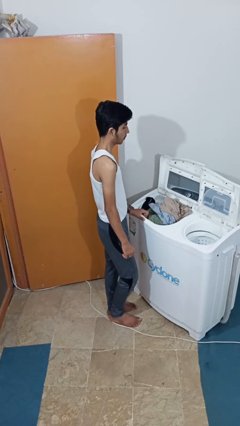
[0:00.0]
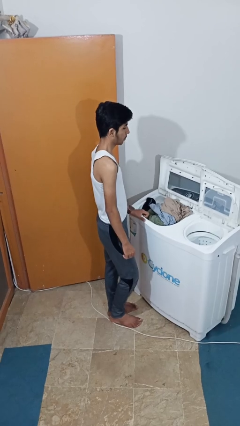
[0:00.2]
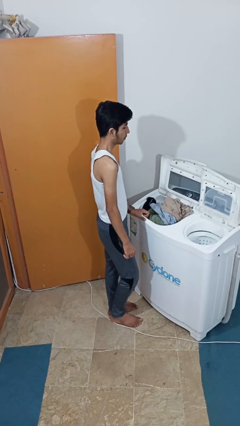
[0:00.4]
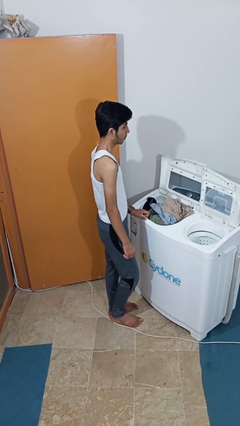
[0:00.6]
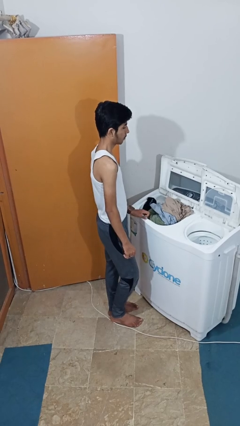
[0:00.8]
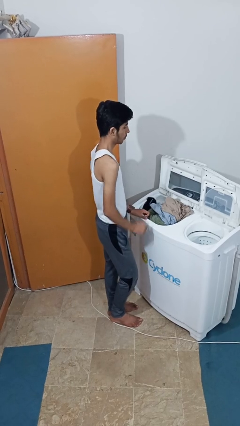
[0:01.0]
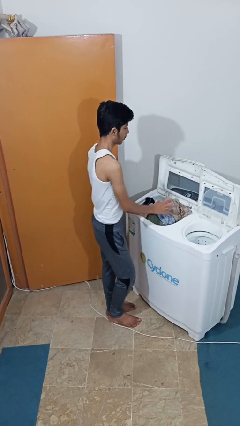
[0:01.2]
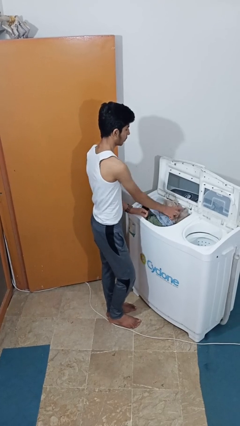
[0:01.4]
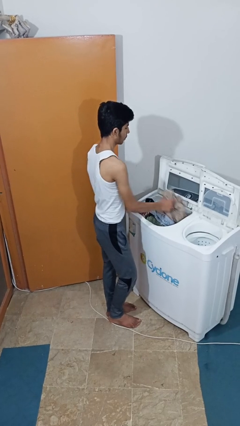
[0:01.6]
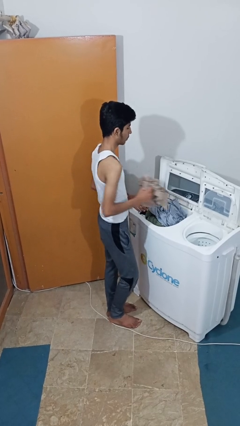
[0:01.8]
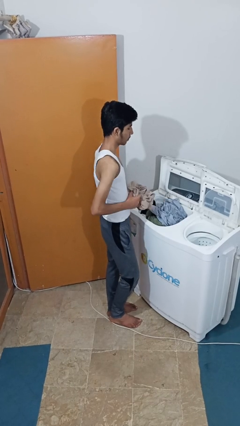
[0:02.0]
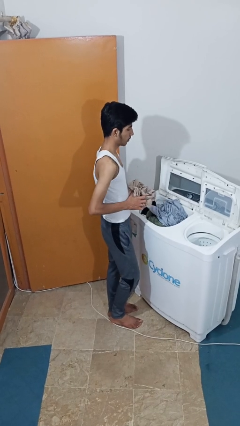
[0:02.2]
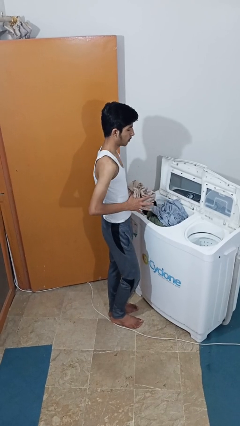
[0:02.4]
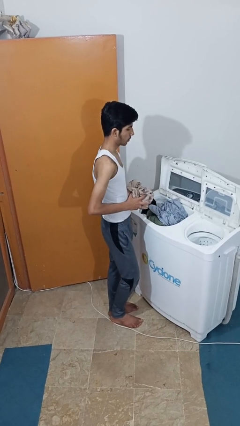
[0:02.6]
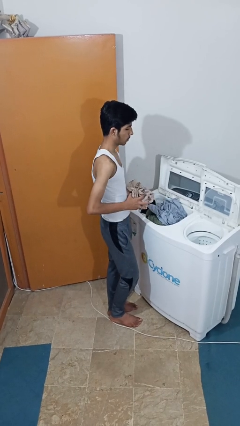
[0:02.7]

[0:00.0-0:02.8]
person unloads clotheswasher

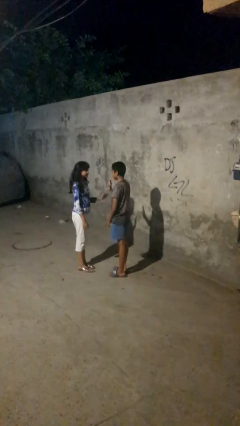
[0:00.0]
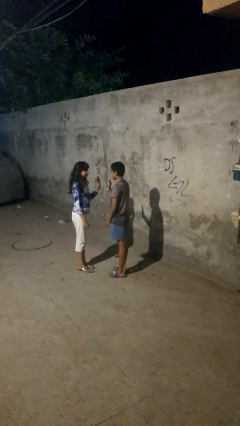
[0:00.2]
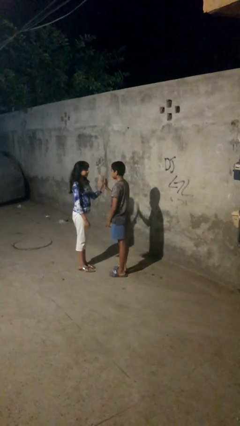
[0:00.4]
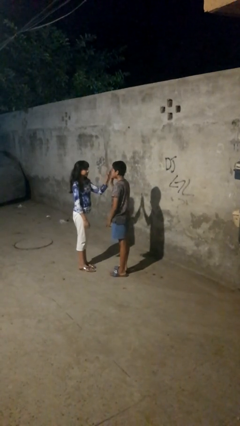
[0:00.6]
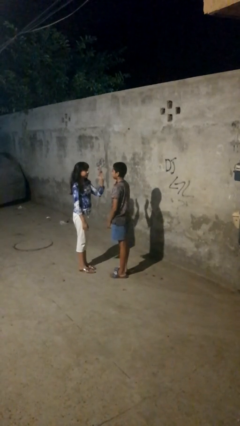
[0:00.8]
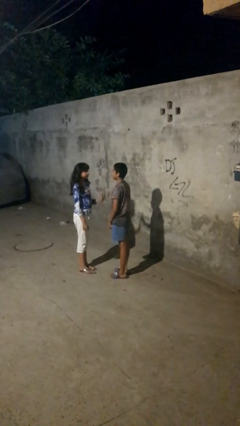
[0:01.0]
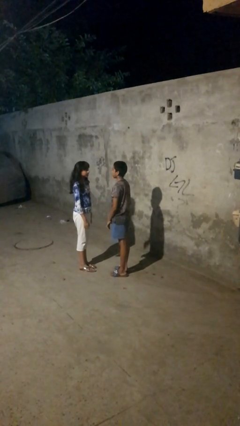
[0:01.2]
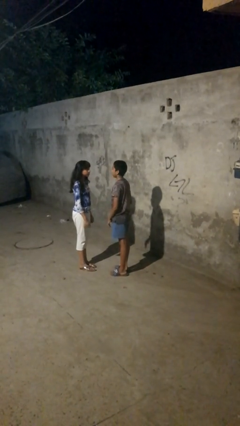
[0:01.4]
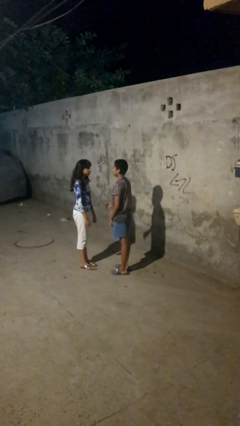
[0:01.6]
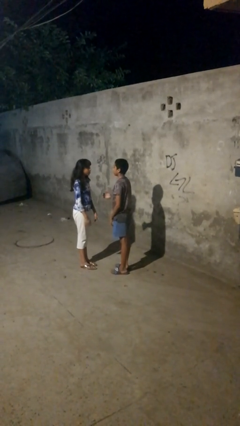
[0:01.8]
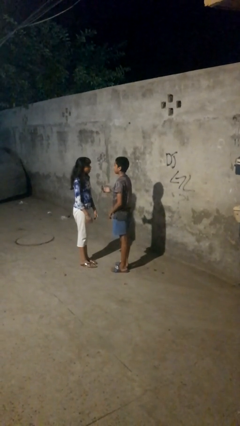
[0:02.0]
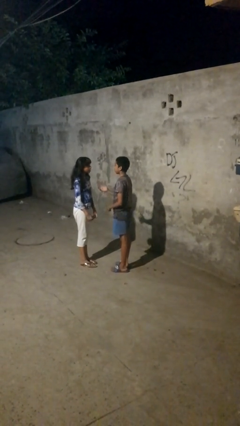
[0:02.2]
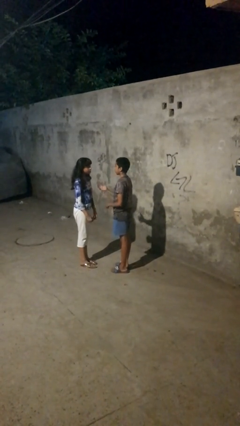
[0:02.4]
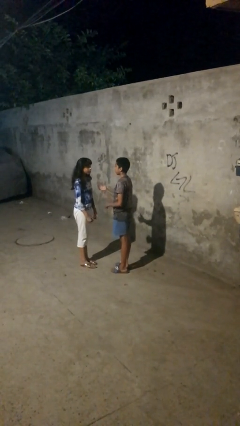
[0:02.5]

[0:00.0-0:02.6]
person highfives hand

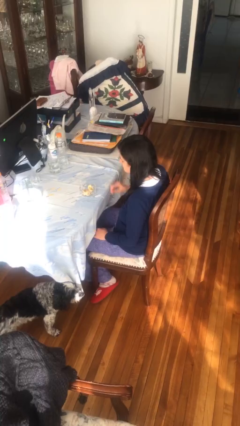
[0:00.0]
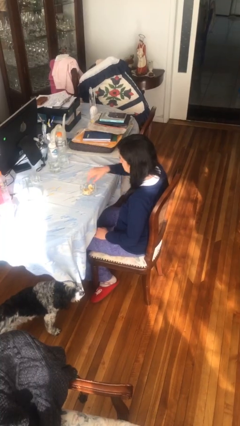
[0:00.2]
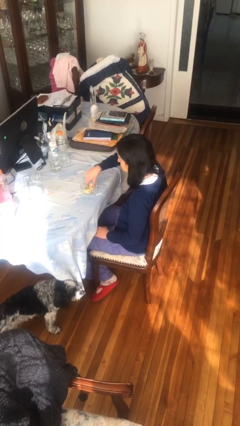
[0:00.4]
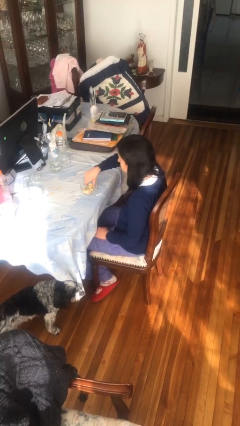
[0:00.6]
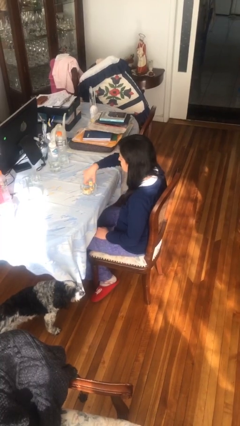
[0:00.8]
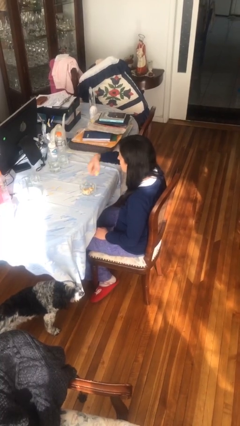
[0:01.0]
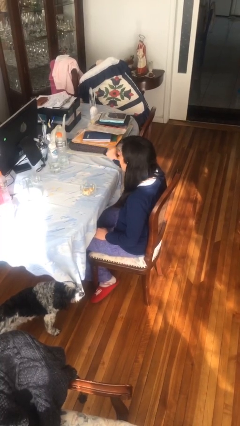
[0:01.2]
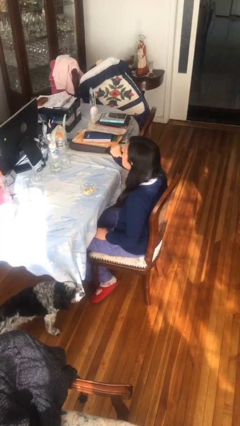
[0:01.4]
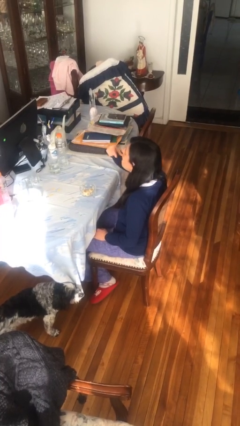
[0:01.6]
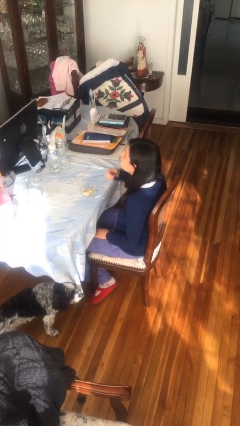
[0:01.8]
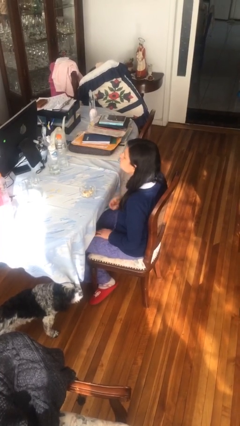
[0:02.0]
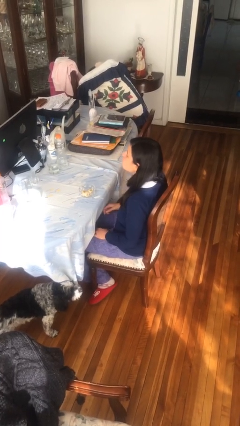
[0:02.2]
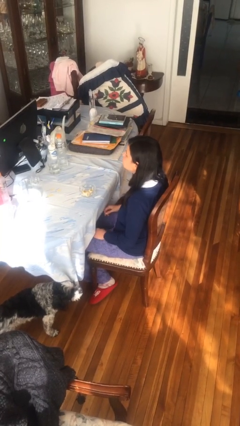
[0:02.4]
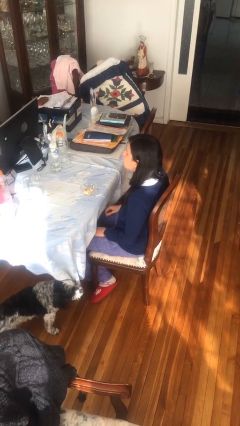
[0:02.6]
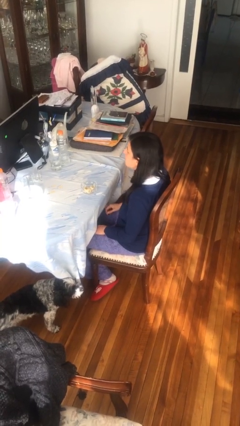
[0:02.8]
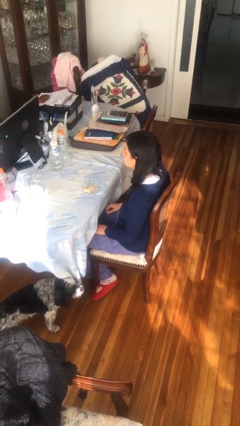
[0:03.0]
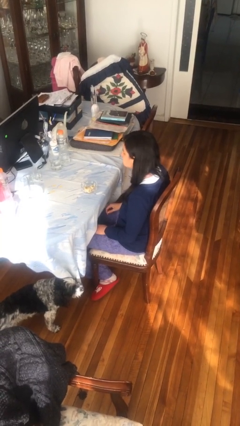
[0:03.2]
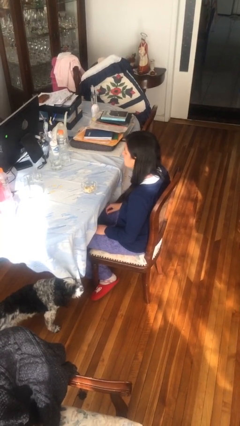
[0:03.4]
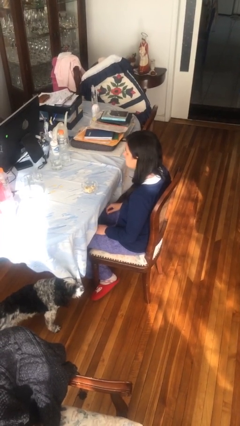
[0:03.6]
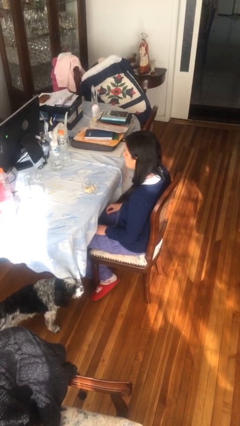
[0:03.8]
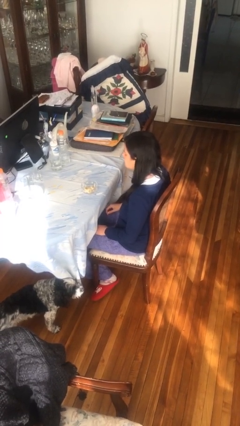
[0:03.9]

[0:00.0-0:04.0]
person eats with hands

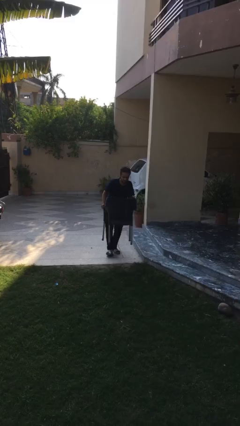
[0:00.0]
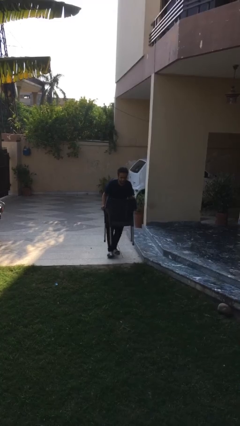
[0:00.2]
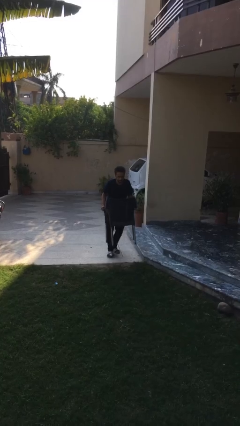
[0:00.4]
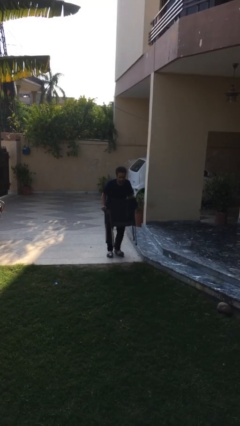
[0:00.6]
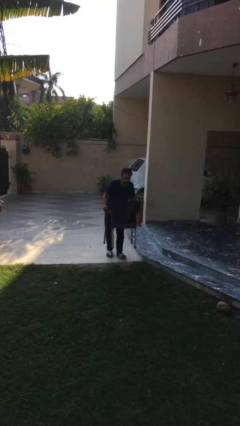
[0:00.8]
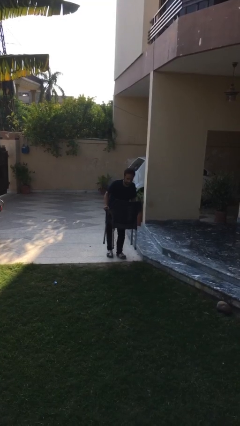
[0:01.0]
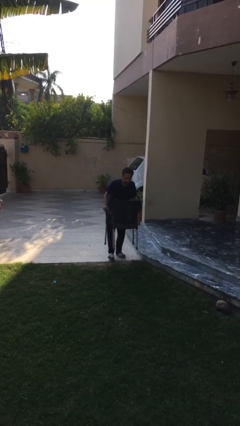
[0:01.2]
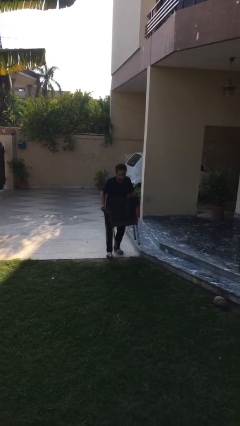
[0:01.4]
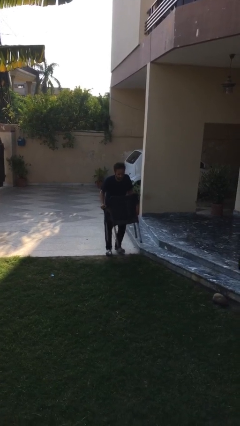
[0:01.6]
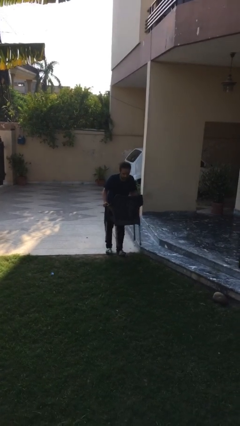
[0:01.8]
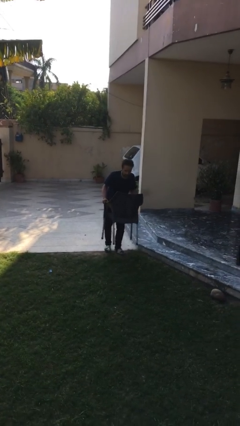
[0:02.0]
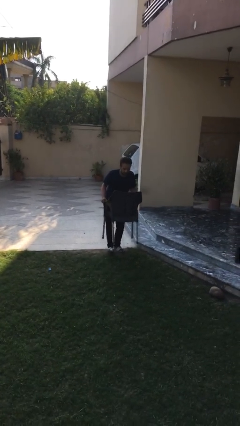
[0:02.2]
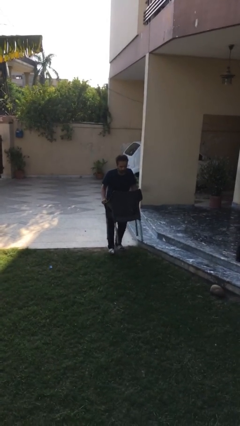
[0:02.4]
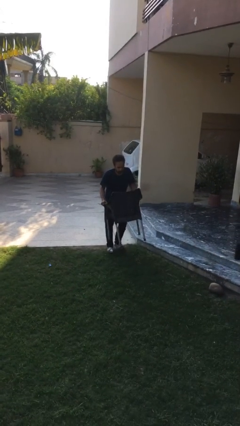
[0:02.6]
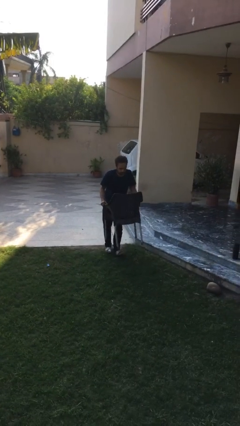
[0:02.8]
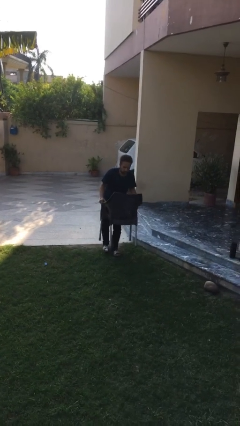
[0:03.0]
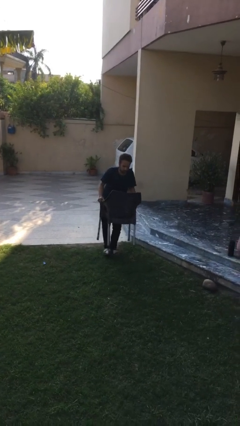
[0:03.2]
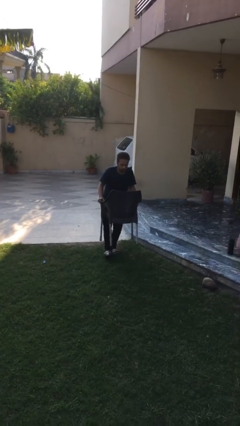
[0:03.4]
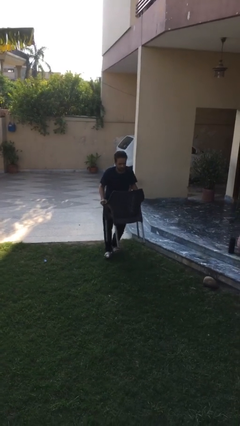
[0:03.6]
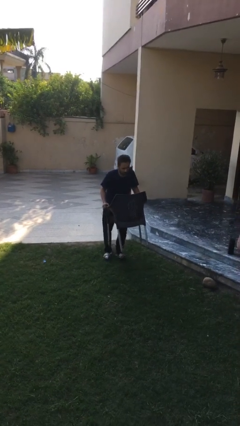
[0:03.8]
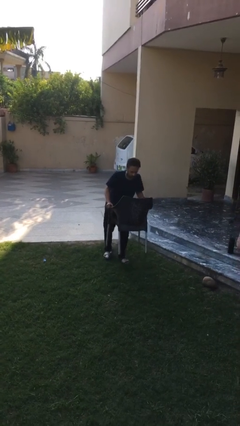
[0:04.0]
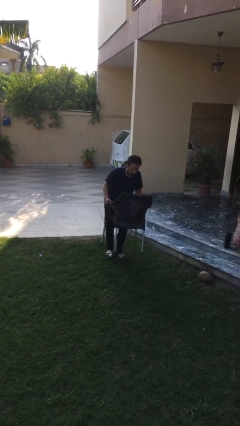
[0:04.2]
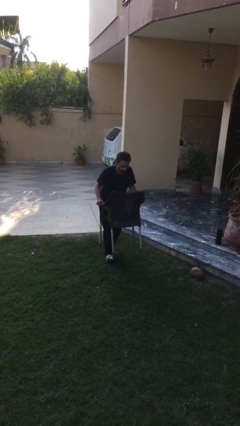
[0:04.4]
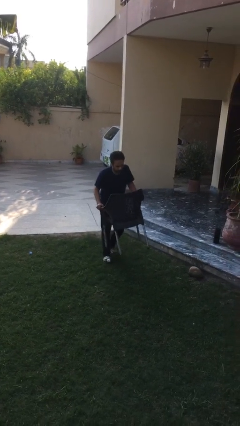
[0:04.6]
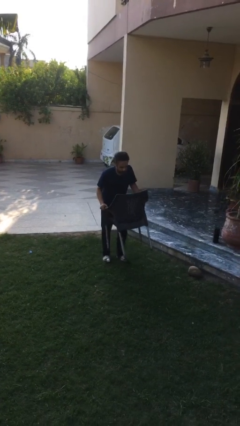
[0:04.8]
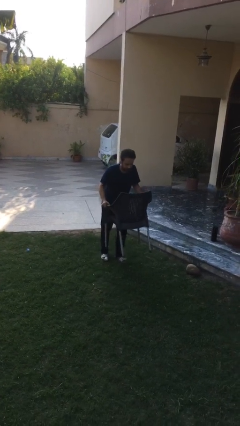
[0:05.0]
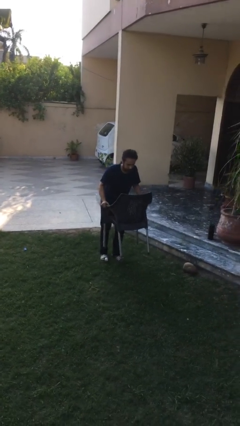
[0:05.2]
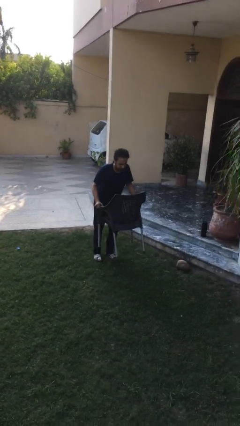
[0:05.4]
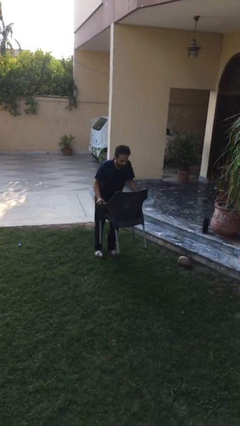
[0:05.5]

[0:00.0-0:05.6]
person carries heavy object

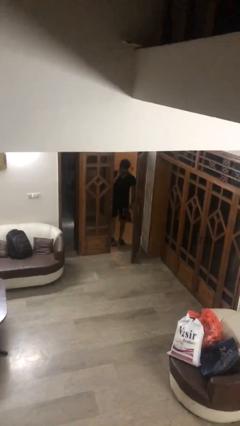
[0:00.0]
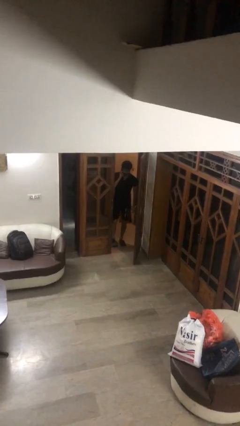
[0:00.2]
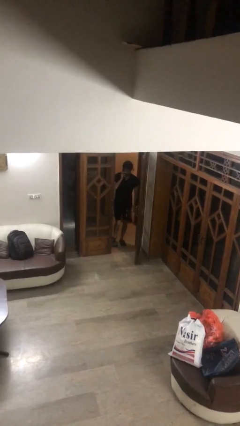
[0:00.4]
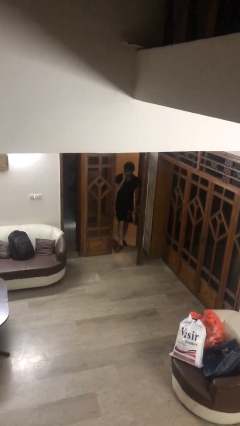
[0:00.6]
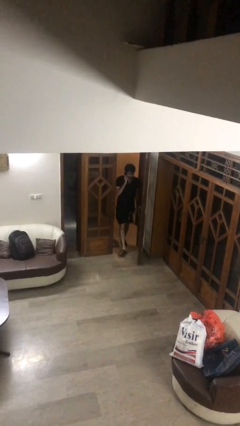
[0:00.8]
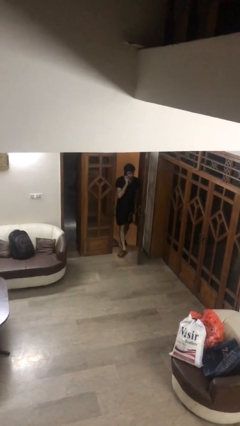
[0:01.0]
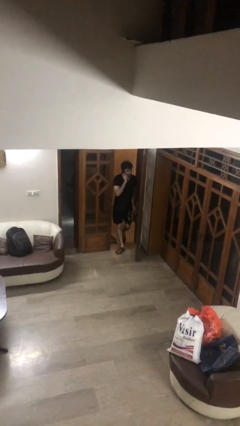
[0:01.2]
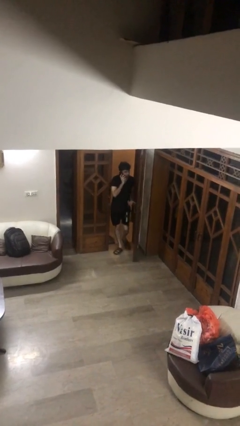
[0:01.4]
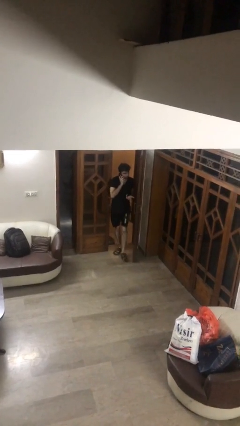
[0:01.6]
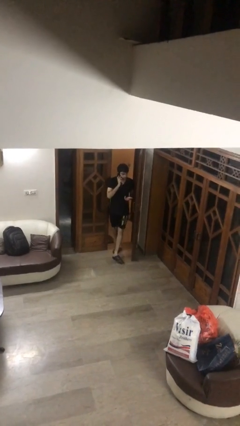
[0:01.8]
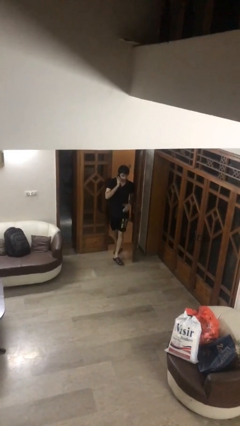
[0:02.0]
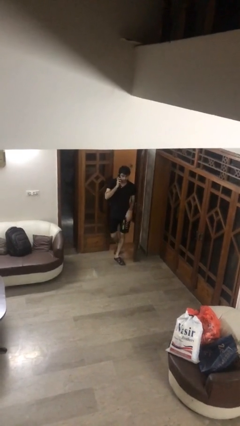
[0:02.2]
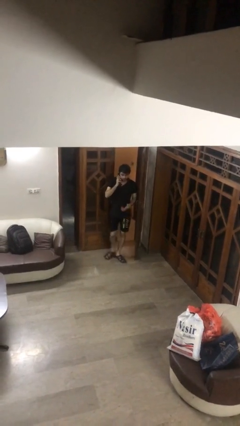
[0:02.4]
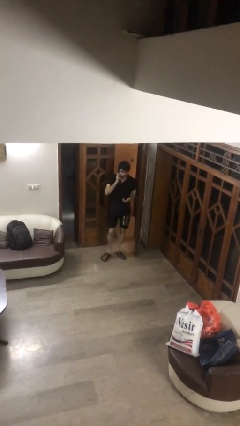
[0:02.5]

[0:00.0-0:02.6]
person enters scene through structure
